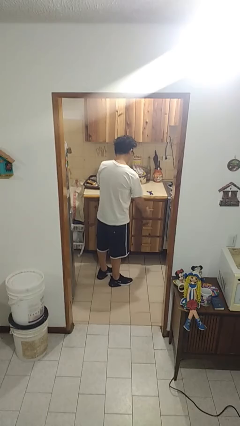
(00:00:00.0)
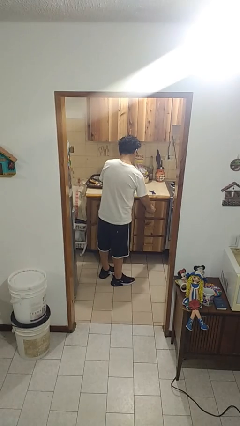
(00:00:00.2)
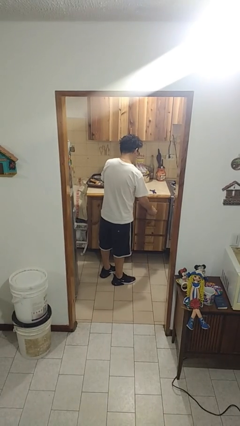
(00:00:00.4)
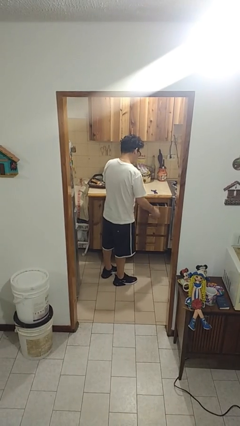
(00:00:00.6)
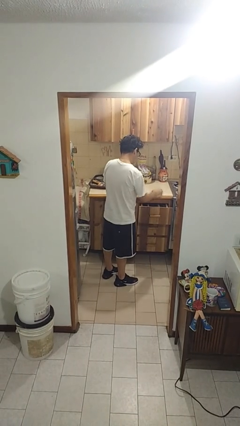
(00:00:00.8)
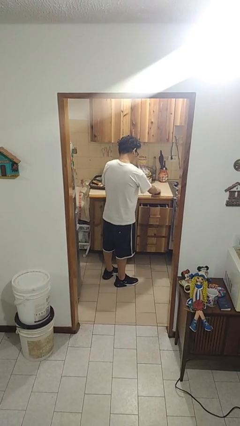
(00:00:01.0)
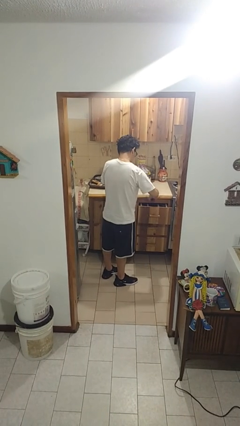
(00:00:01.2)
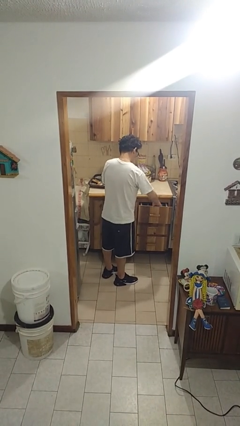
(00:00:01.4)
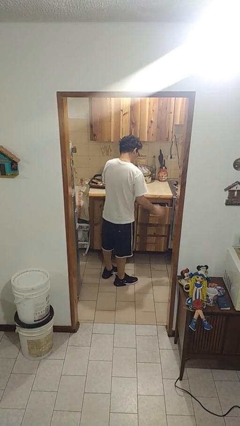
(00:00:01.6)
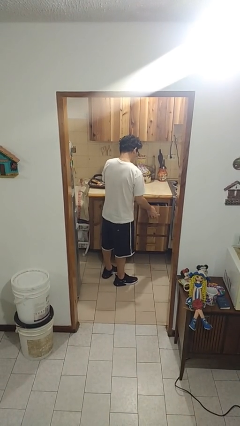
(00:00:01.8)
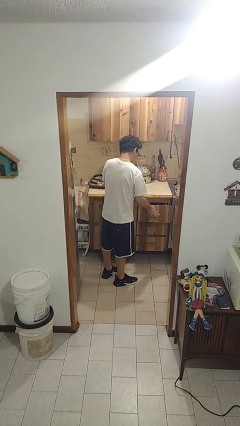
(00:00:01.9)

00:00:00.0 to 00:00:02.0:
person puts object into kitchen drawer

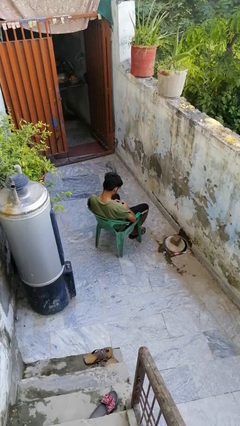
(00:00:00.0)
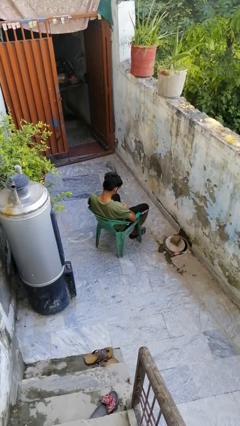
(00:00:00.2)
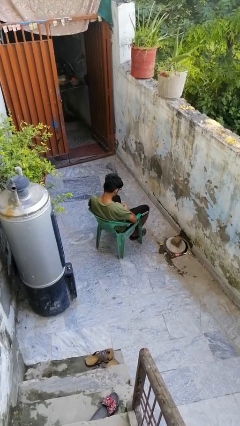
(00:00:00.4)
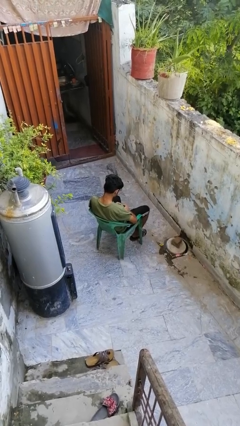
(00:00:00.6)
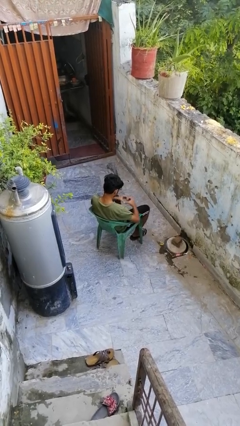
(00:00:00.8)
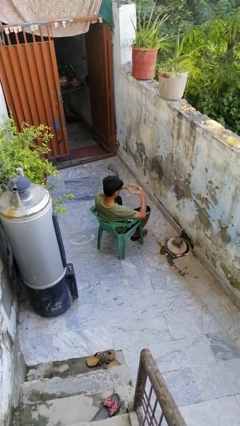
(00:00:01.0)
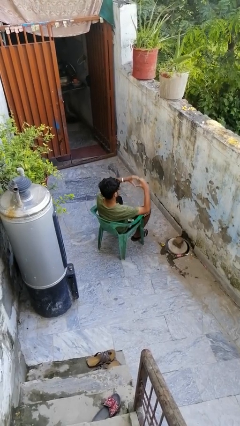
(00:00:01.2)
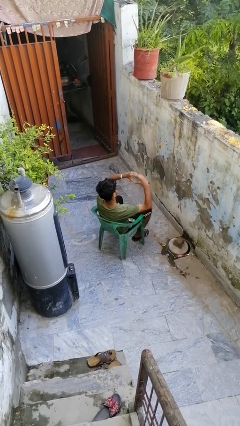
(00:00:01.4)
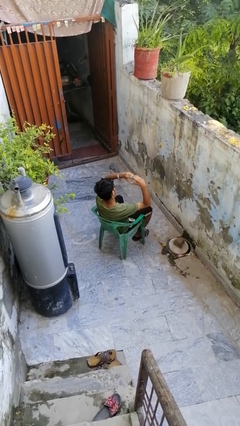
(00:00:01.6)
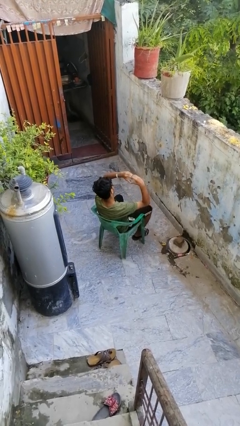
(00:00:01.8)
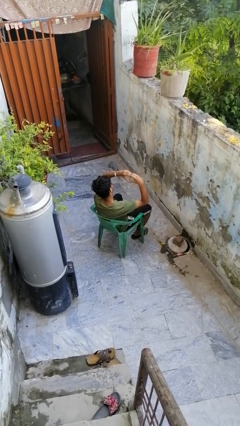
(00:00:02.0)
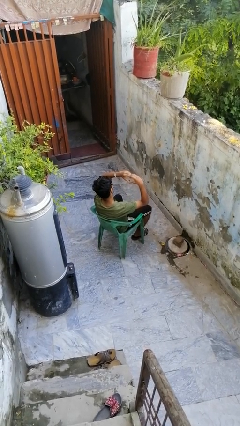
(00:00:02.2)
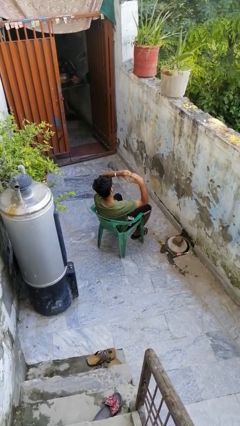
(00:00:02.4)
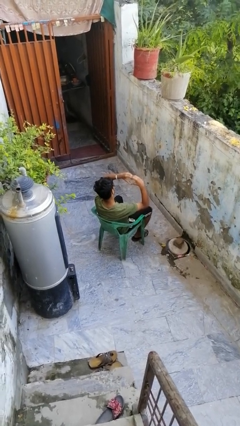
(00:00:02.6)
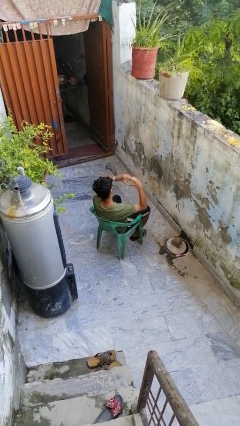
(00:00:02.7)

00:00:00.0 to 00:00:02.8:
person gestures heart

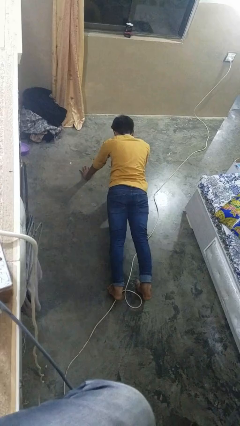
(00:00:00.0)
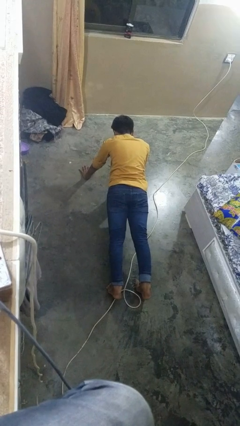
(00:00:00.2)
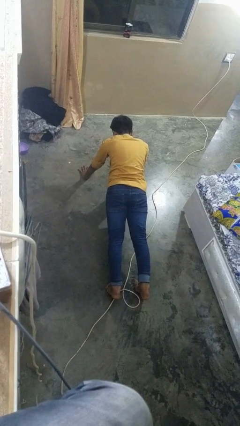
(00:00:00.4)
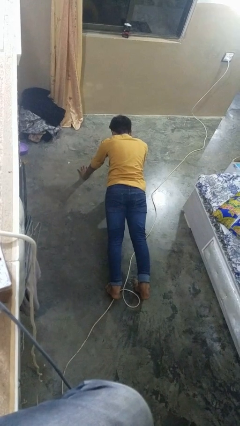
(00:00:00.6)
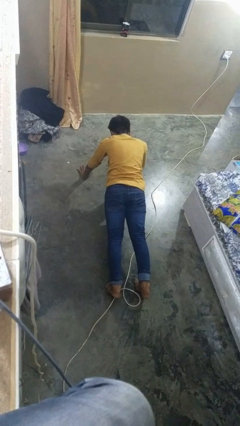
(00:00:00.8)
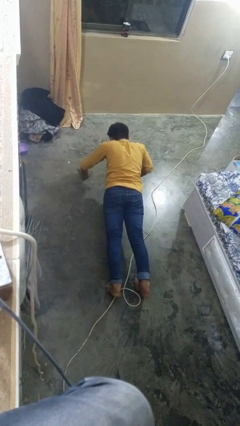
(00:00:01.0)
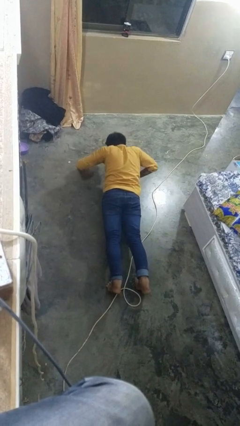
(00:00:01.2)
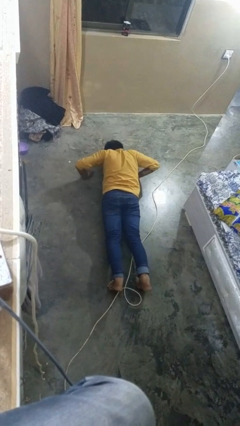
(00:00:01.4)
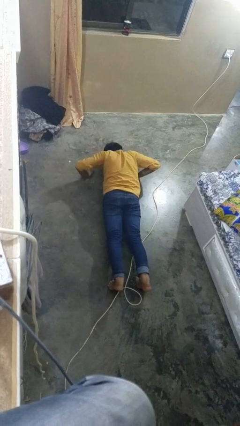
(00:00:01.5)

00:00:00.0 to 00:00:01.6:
person exercises with pushup

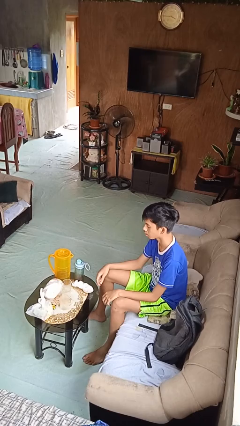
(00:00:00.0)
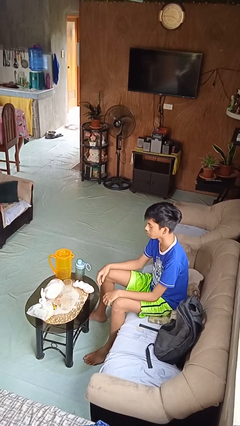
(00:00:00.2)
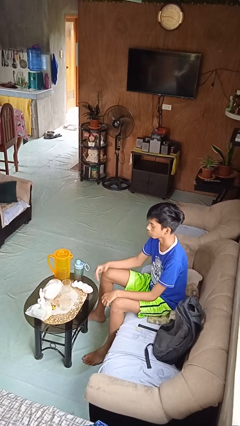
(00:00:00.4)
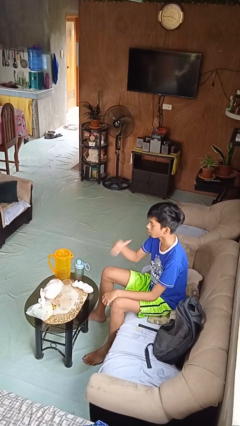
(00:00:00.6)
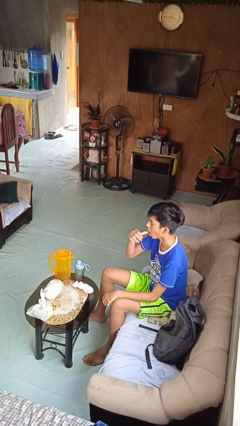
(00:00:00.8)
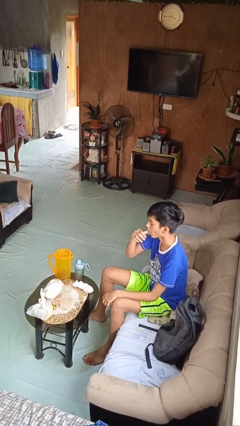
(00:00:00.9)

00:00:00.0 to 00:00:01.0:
person licks fingers

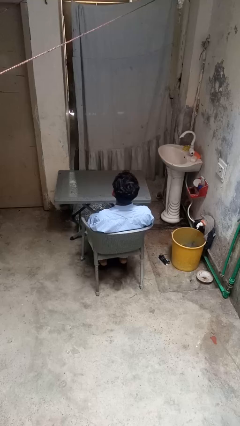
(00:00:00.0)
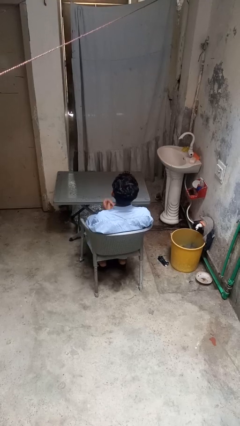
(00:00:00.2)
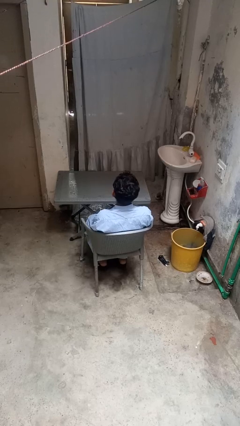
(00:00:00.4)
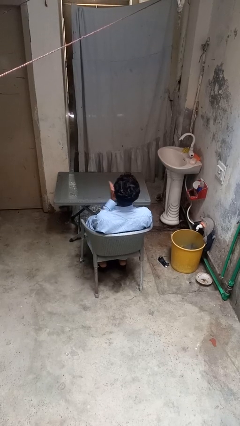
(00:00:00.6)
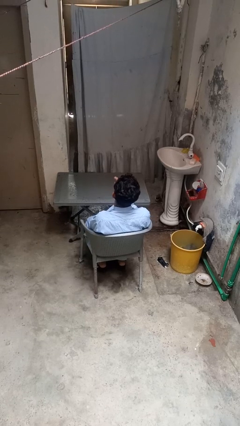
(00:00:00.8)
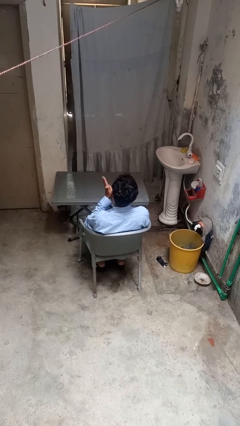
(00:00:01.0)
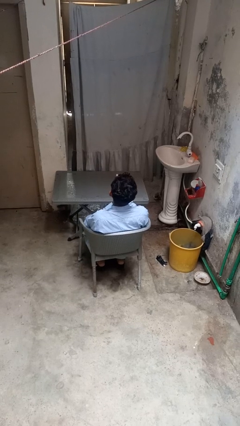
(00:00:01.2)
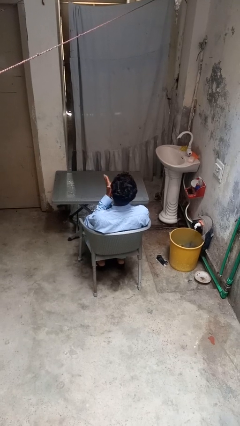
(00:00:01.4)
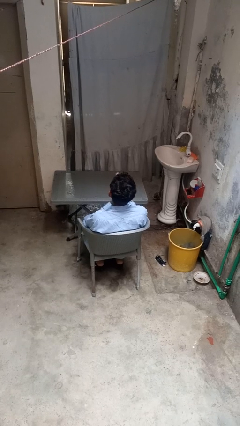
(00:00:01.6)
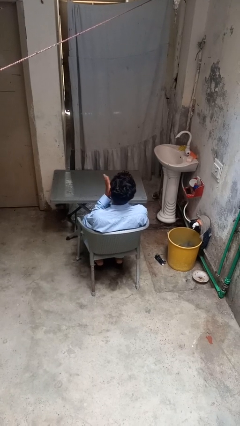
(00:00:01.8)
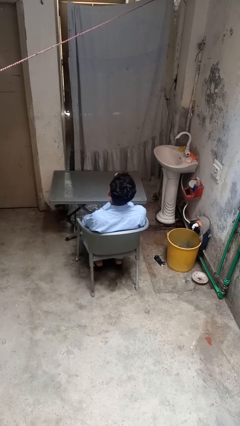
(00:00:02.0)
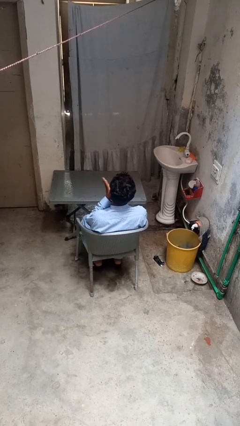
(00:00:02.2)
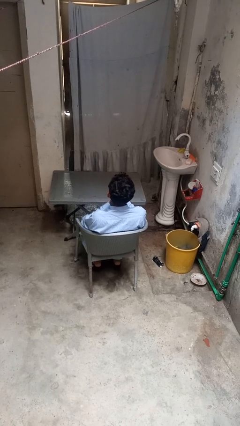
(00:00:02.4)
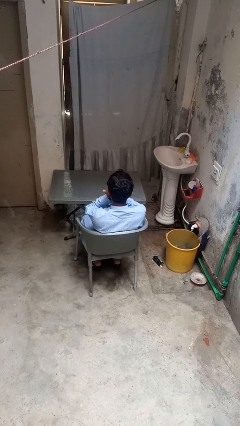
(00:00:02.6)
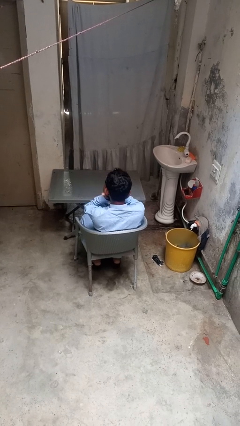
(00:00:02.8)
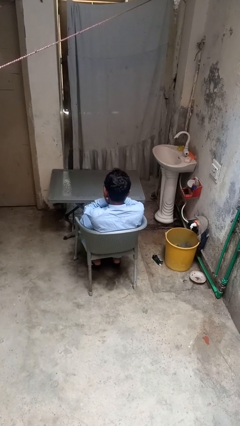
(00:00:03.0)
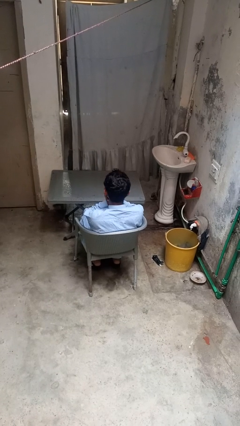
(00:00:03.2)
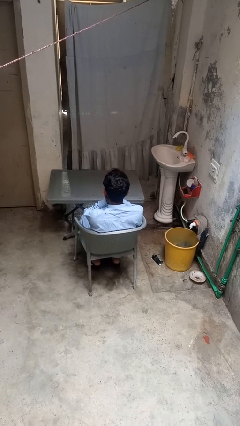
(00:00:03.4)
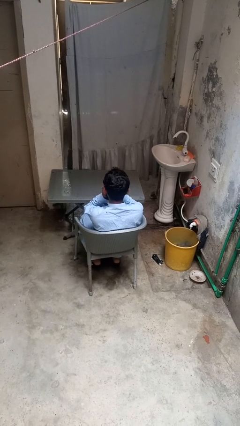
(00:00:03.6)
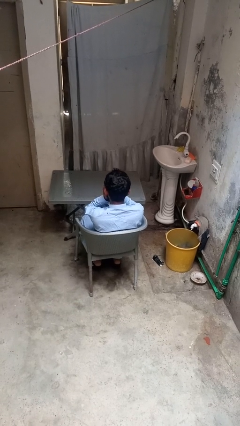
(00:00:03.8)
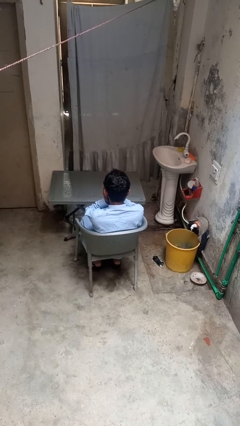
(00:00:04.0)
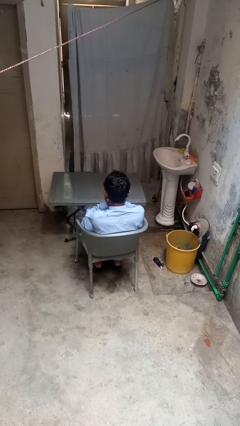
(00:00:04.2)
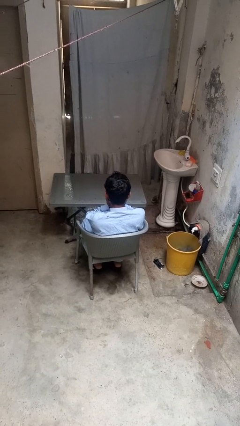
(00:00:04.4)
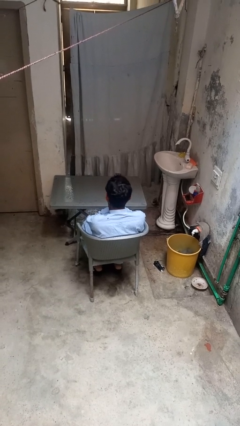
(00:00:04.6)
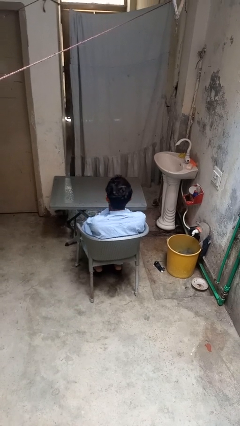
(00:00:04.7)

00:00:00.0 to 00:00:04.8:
person blows into hands

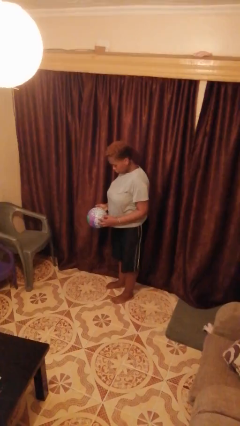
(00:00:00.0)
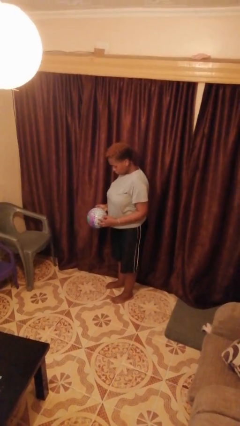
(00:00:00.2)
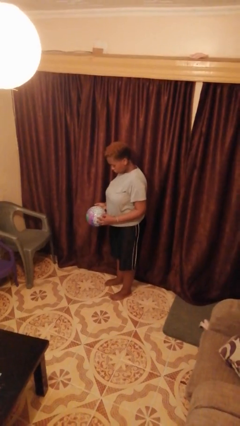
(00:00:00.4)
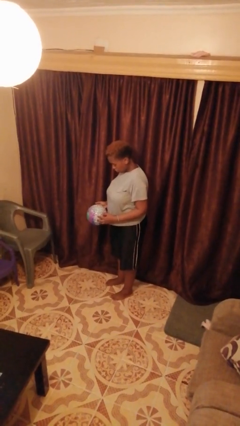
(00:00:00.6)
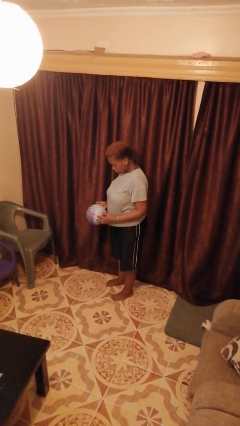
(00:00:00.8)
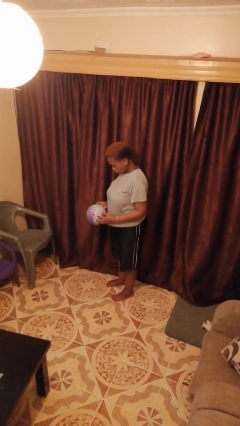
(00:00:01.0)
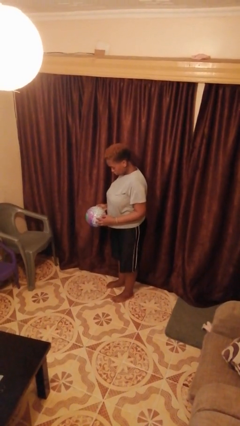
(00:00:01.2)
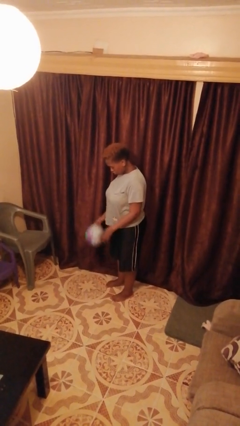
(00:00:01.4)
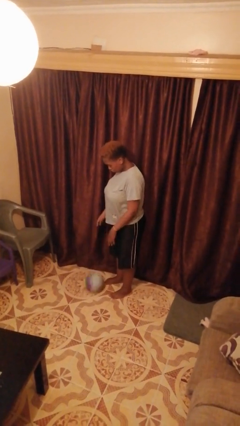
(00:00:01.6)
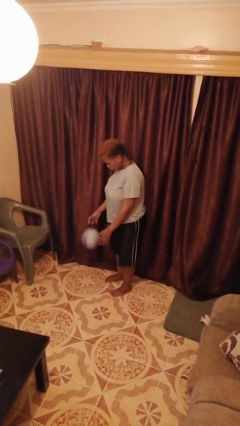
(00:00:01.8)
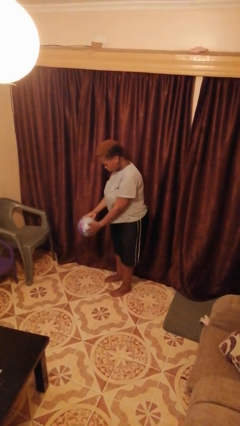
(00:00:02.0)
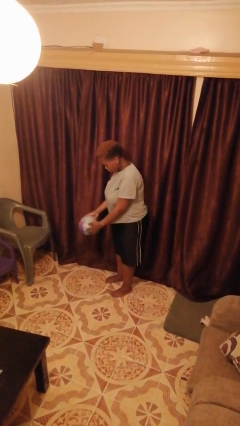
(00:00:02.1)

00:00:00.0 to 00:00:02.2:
person bounces ball on floor

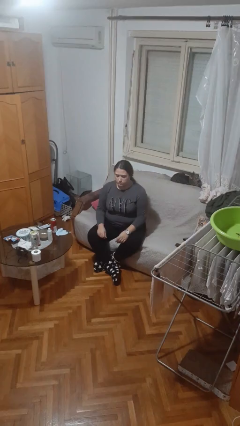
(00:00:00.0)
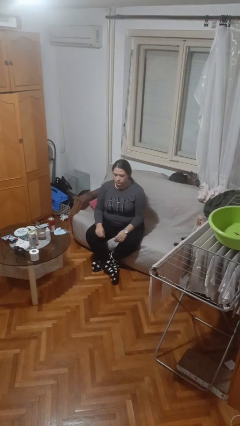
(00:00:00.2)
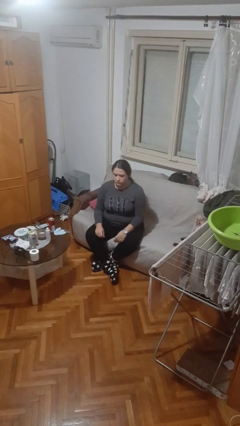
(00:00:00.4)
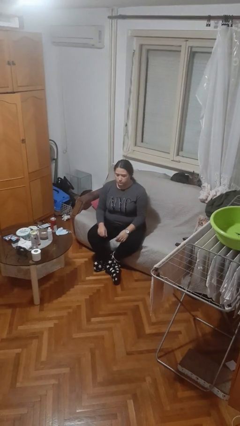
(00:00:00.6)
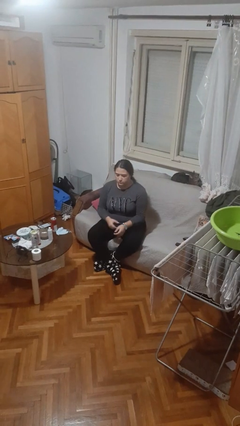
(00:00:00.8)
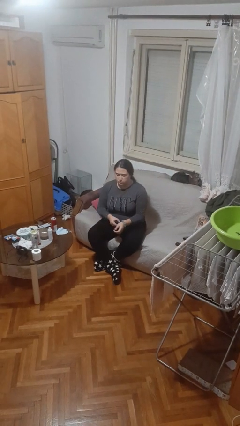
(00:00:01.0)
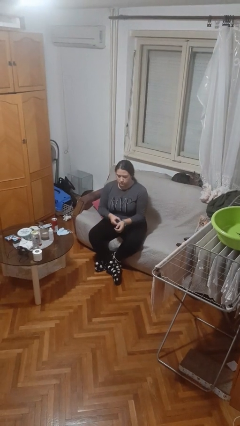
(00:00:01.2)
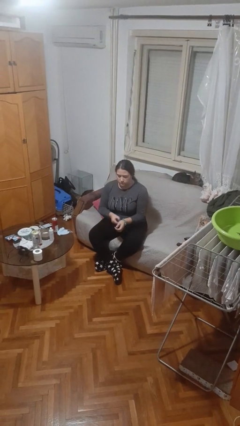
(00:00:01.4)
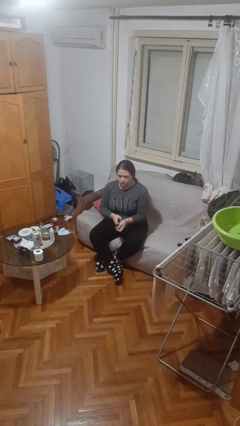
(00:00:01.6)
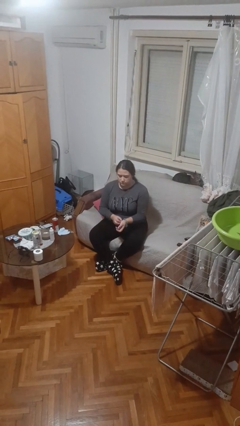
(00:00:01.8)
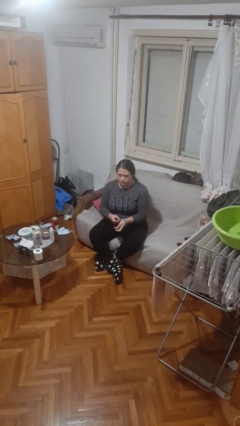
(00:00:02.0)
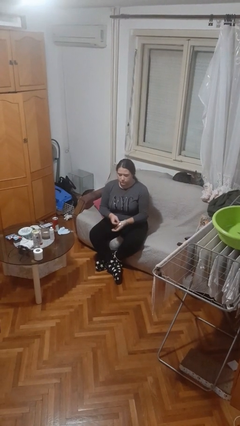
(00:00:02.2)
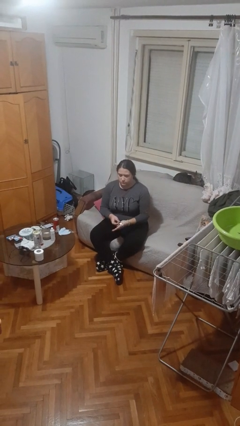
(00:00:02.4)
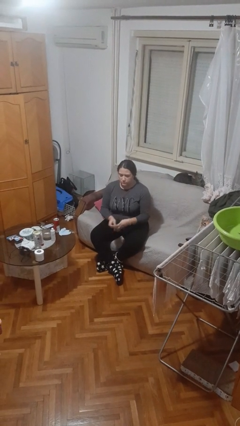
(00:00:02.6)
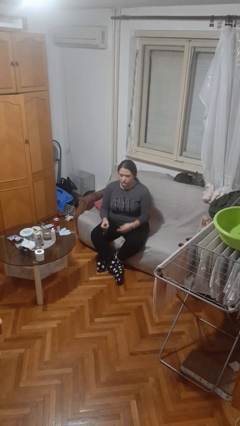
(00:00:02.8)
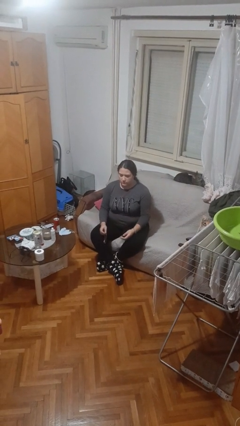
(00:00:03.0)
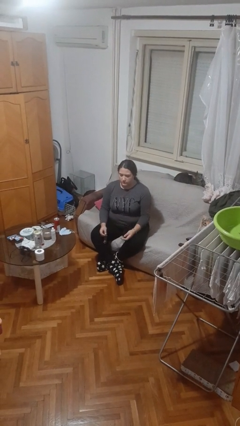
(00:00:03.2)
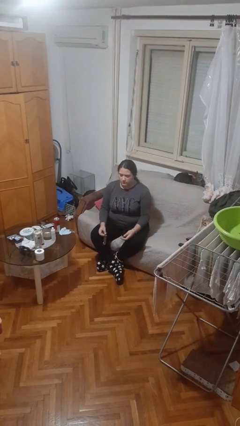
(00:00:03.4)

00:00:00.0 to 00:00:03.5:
person takes off wristwatch
